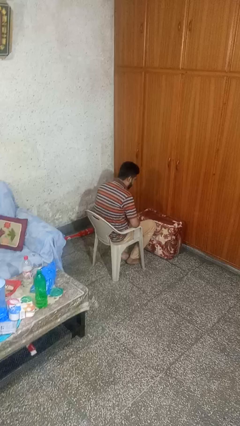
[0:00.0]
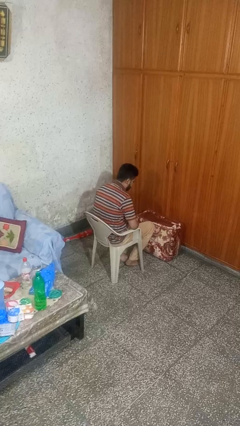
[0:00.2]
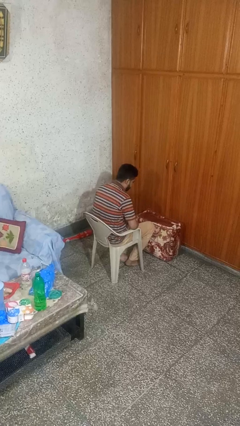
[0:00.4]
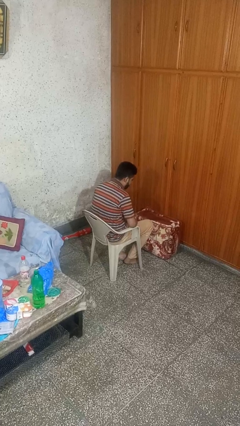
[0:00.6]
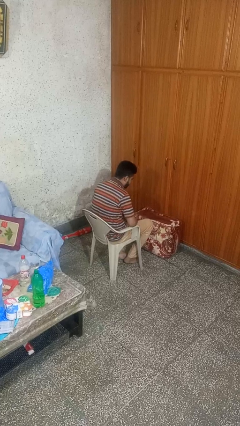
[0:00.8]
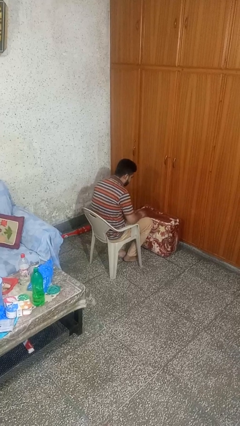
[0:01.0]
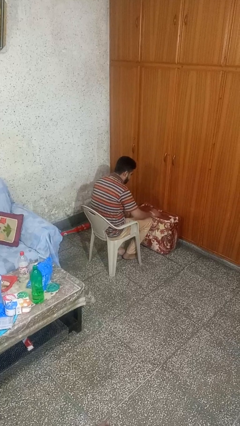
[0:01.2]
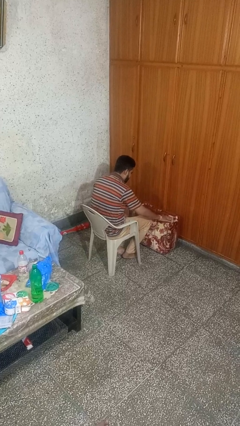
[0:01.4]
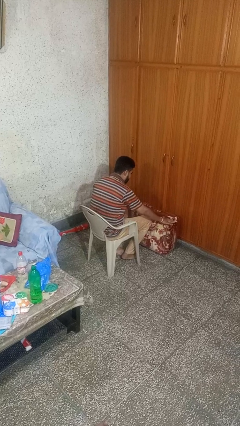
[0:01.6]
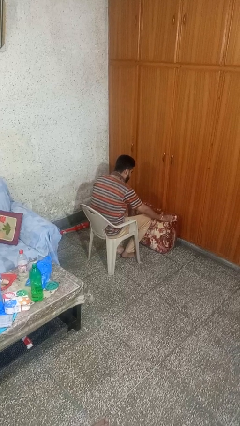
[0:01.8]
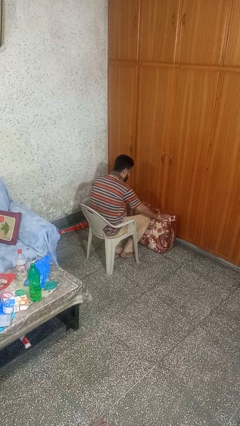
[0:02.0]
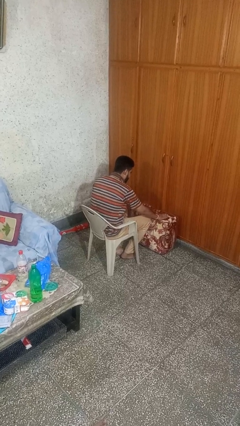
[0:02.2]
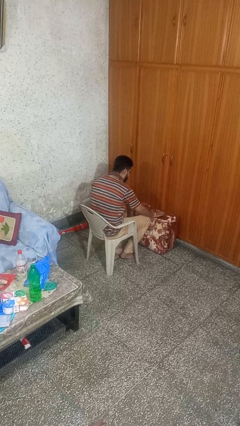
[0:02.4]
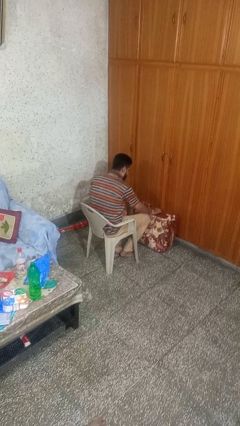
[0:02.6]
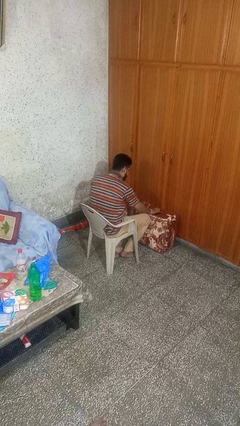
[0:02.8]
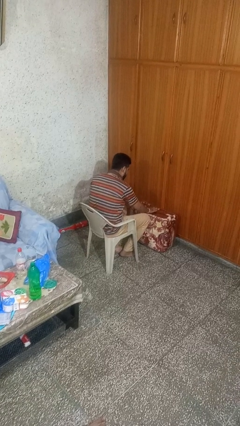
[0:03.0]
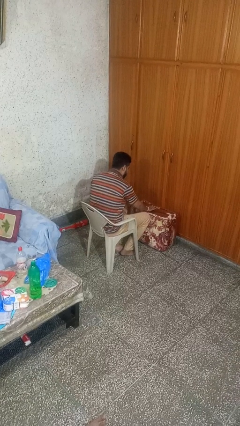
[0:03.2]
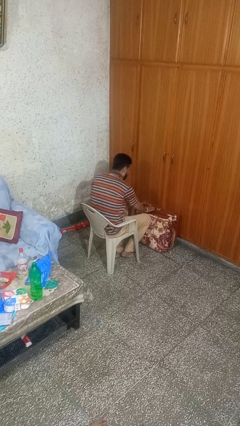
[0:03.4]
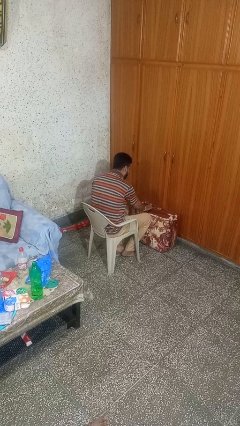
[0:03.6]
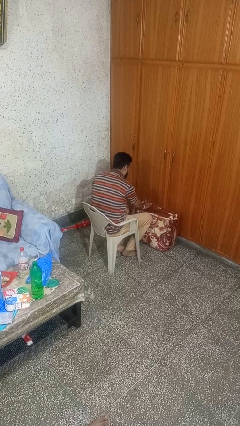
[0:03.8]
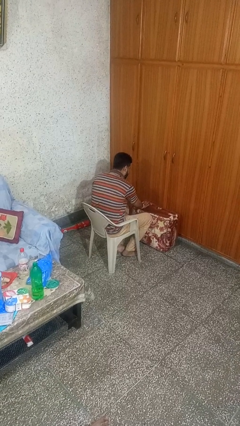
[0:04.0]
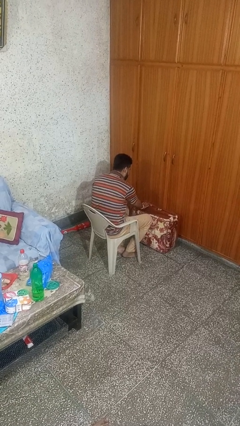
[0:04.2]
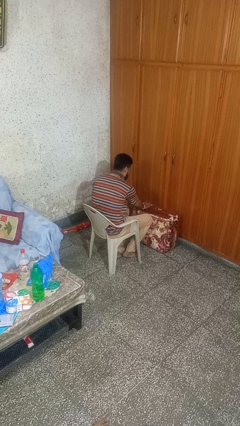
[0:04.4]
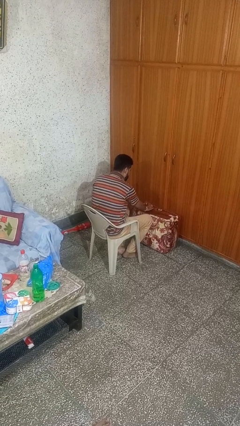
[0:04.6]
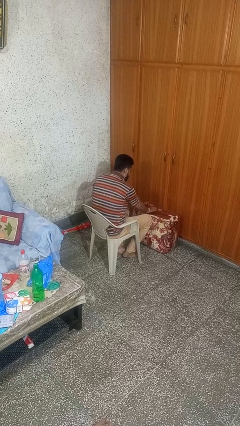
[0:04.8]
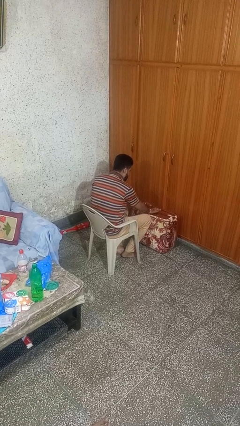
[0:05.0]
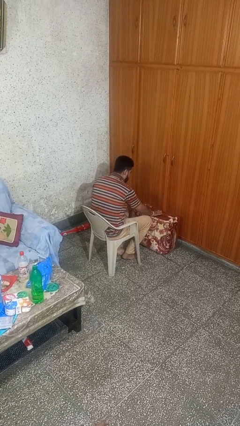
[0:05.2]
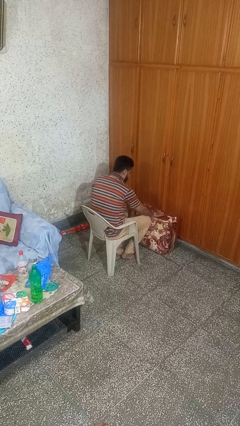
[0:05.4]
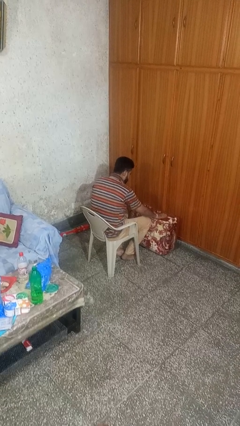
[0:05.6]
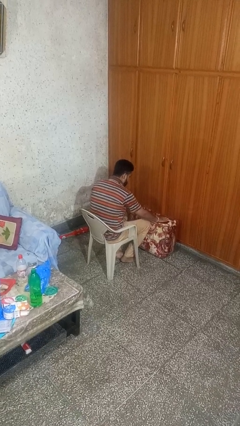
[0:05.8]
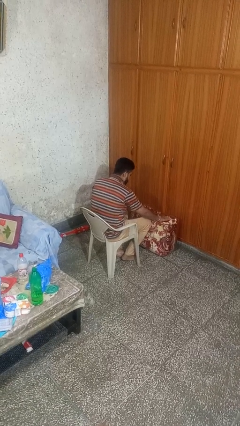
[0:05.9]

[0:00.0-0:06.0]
person waves hand over object

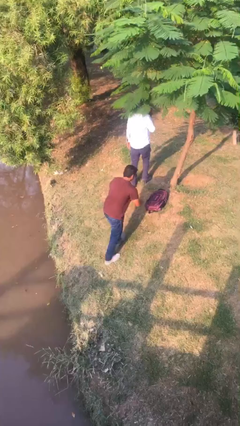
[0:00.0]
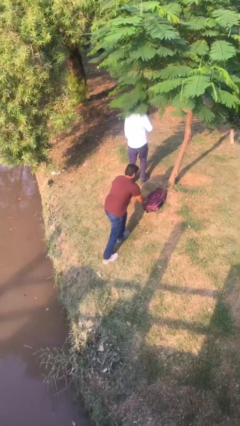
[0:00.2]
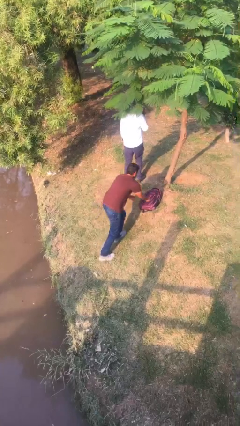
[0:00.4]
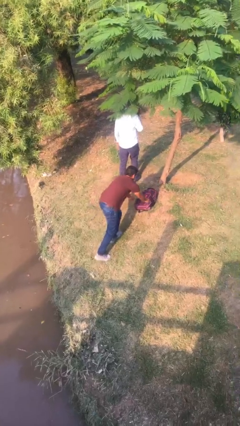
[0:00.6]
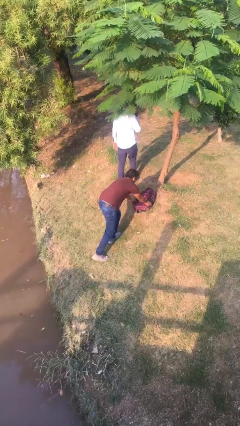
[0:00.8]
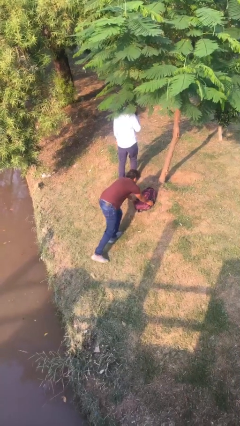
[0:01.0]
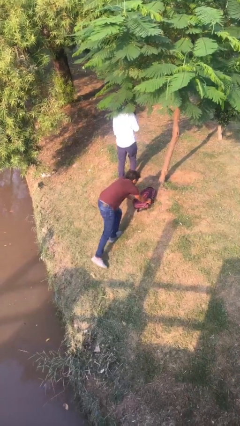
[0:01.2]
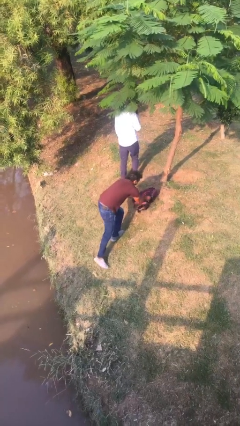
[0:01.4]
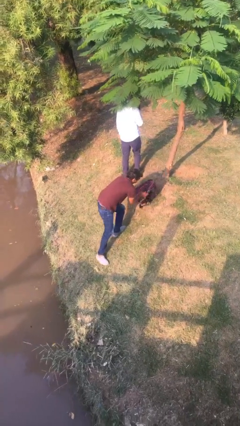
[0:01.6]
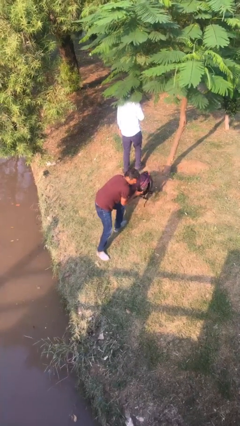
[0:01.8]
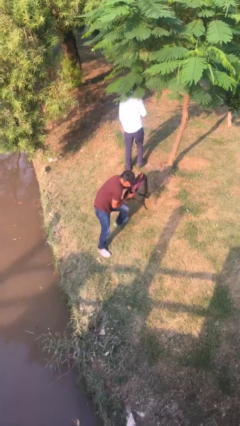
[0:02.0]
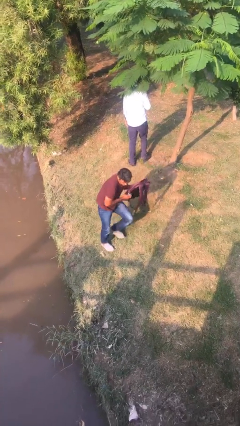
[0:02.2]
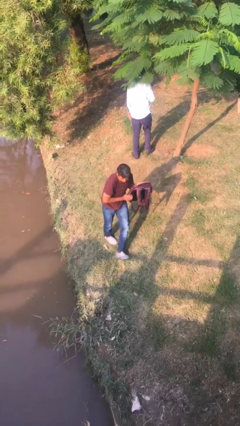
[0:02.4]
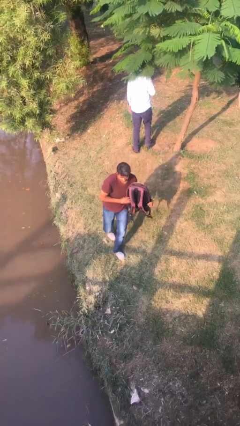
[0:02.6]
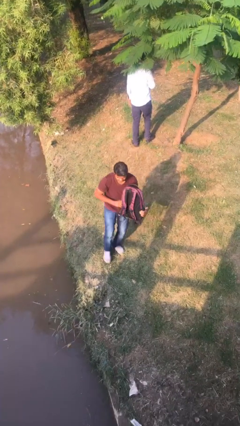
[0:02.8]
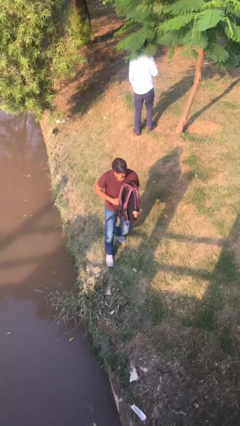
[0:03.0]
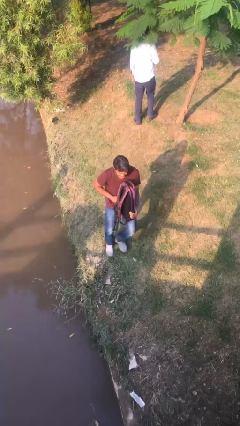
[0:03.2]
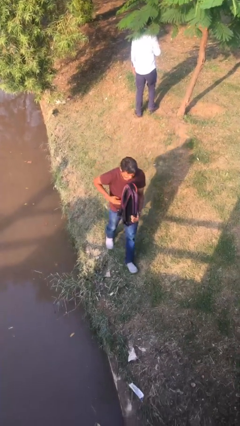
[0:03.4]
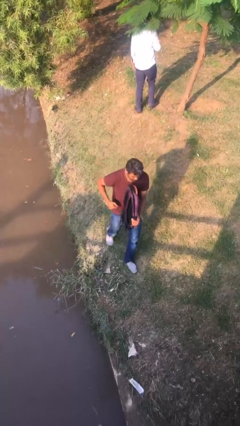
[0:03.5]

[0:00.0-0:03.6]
person steals object from person

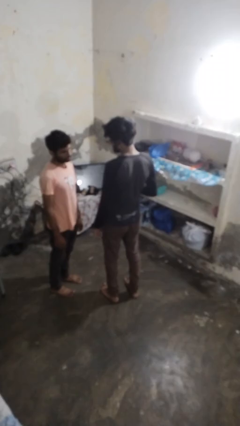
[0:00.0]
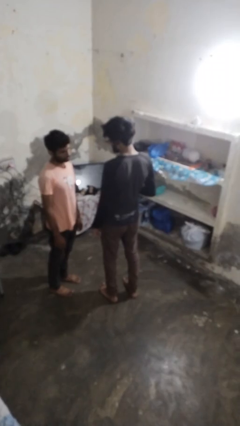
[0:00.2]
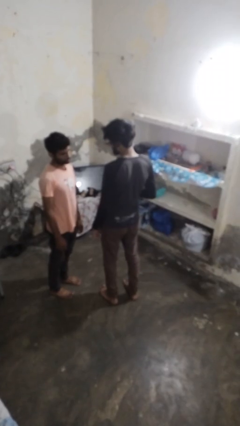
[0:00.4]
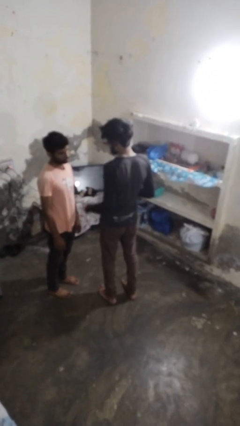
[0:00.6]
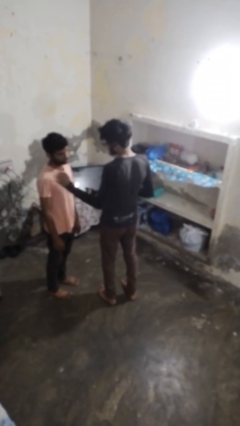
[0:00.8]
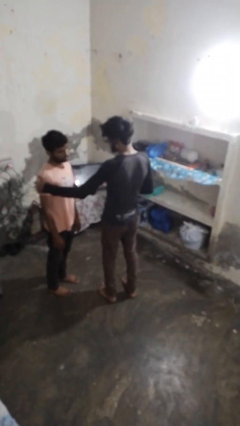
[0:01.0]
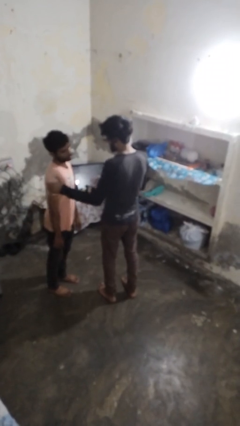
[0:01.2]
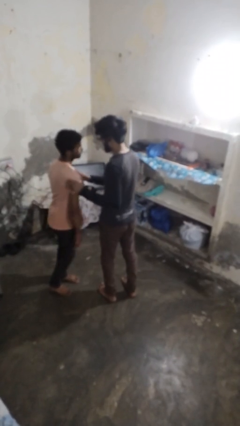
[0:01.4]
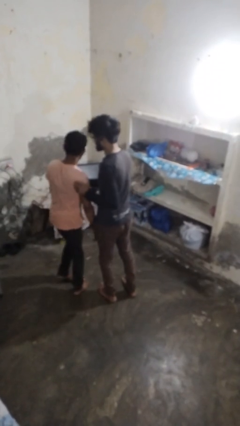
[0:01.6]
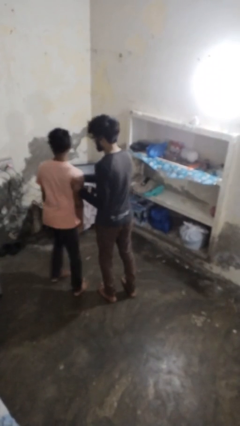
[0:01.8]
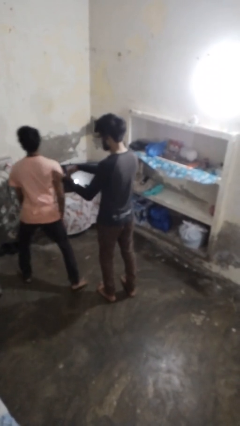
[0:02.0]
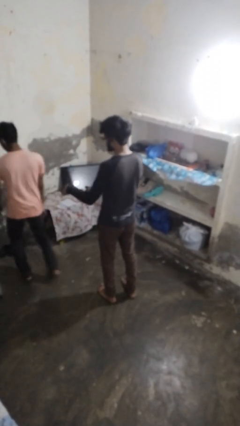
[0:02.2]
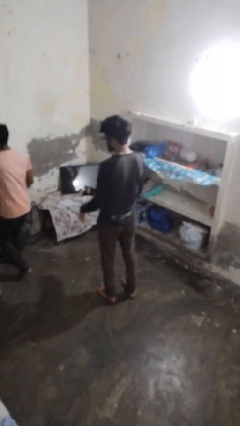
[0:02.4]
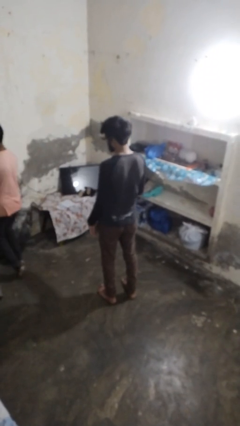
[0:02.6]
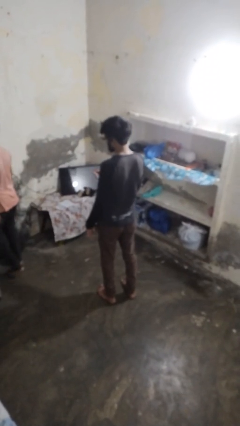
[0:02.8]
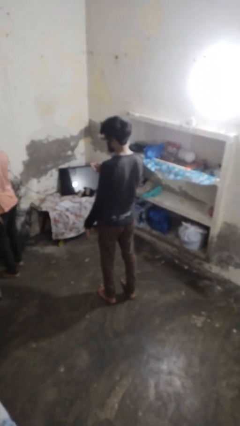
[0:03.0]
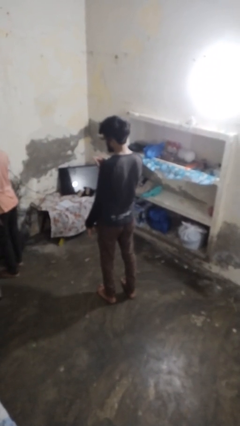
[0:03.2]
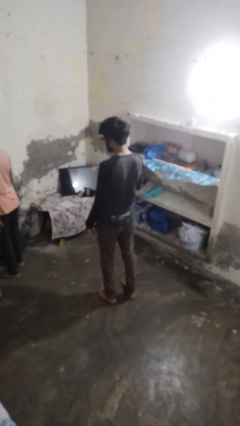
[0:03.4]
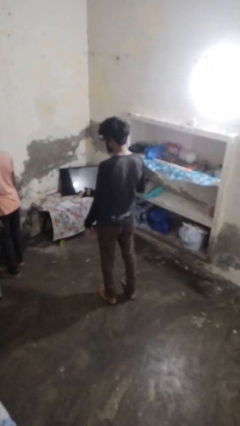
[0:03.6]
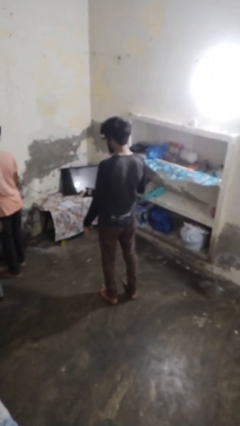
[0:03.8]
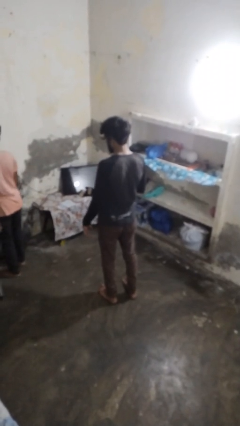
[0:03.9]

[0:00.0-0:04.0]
person shoves person

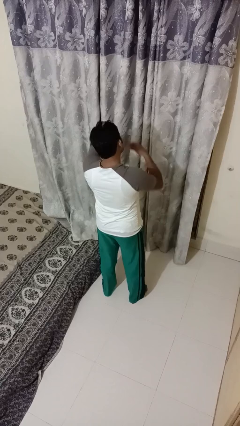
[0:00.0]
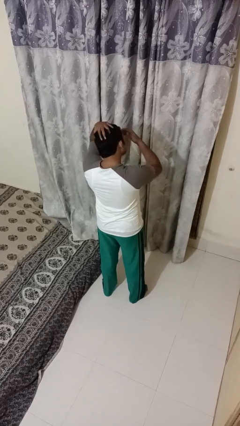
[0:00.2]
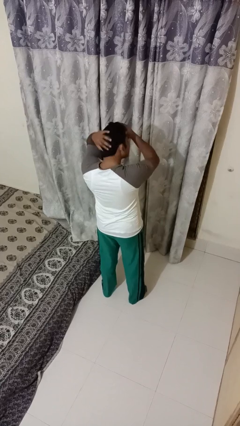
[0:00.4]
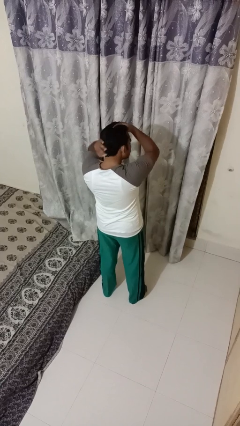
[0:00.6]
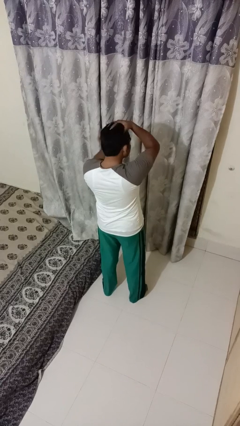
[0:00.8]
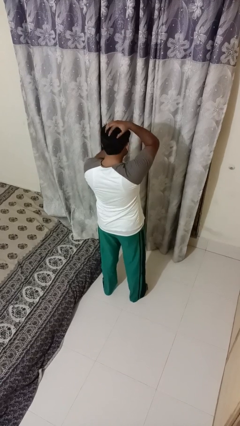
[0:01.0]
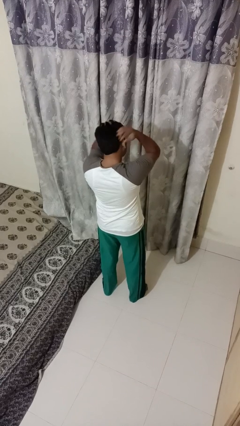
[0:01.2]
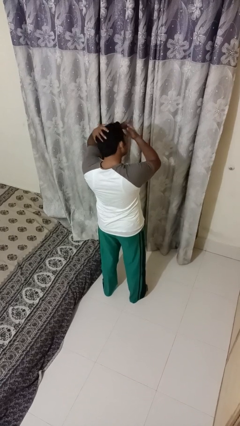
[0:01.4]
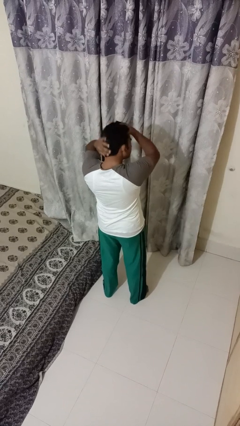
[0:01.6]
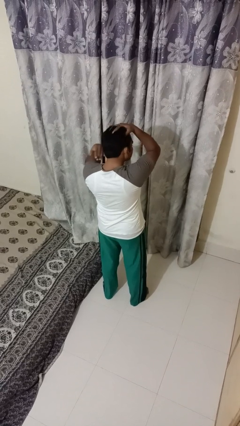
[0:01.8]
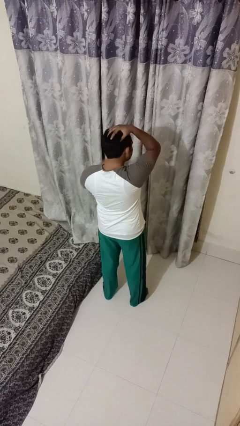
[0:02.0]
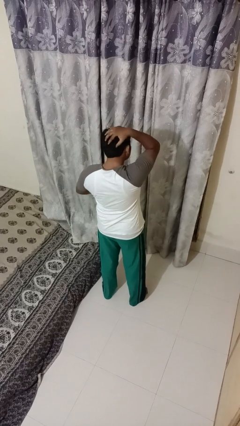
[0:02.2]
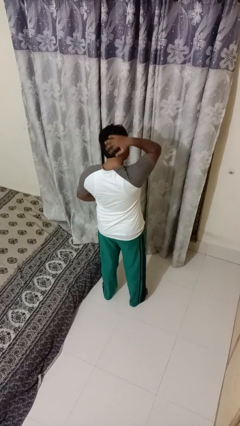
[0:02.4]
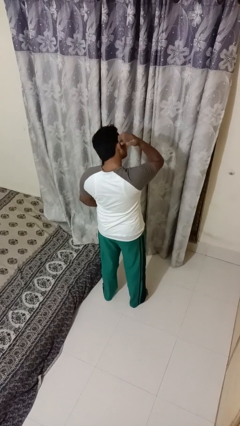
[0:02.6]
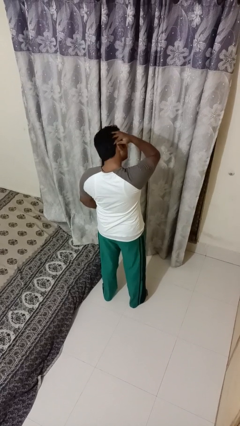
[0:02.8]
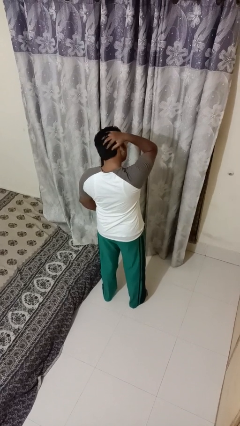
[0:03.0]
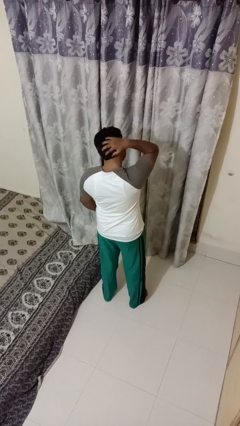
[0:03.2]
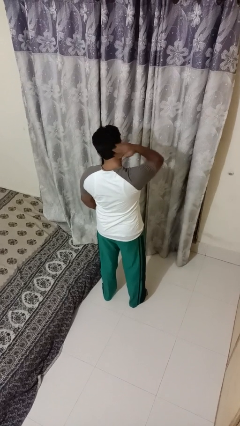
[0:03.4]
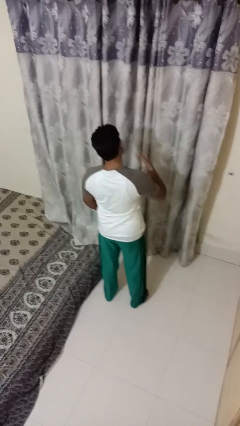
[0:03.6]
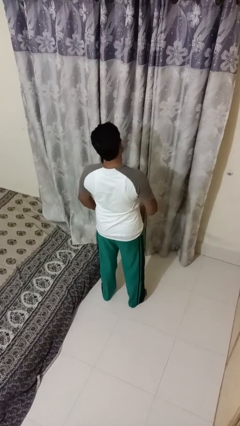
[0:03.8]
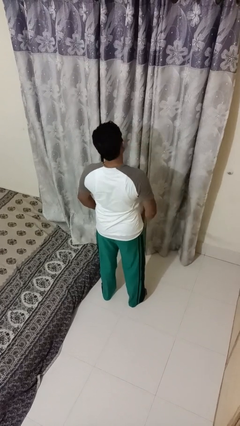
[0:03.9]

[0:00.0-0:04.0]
person strokes hair
